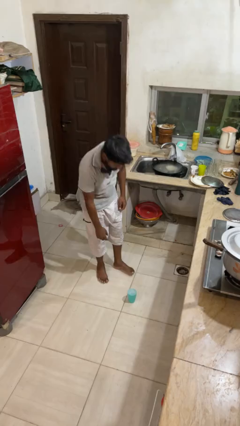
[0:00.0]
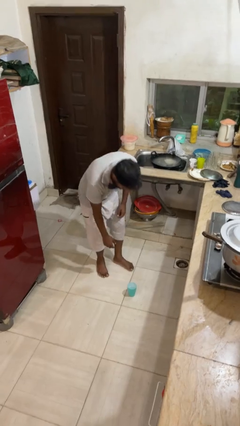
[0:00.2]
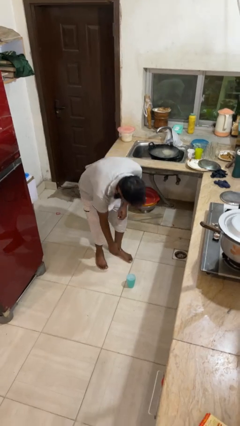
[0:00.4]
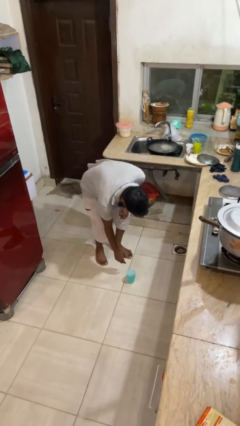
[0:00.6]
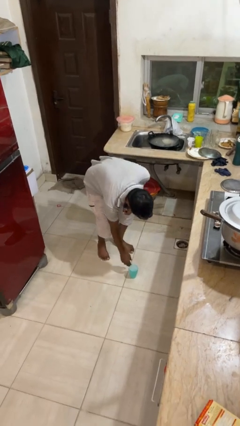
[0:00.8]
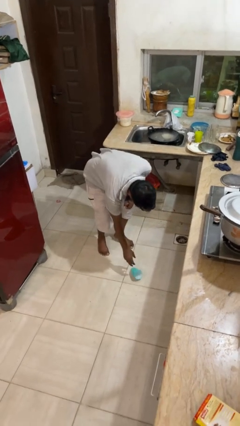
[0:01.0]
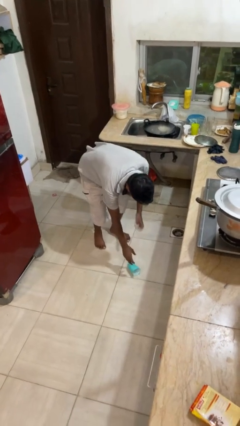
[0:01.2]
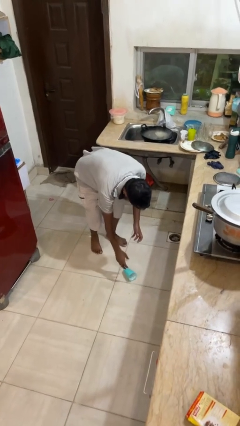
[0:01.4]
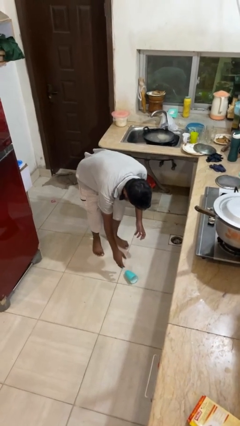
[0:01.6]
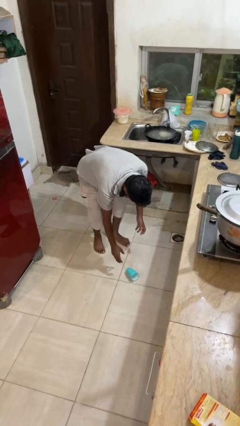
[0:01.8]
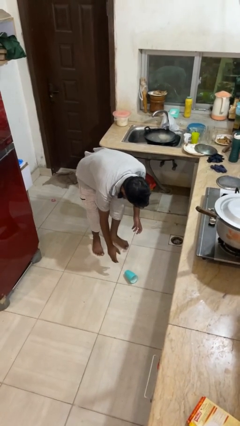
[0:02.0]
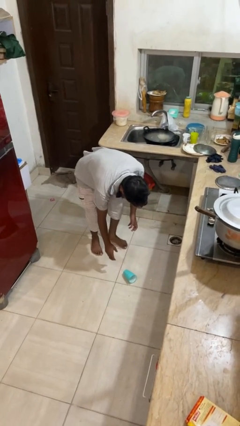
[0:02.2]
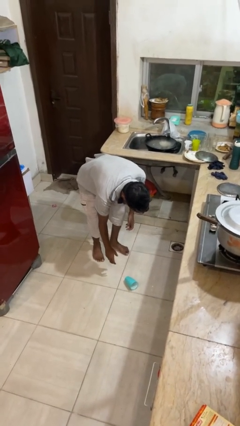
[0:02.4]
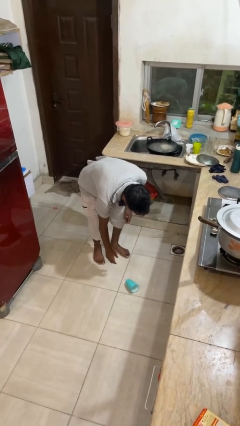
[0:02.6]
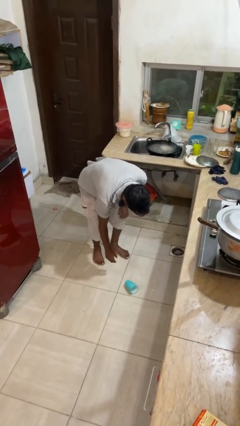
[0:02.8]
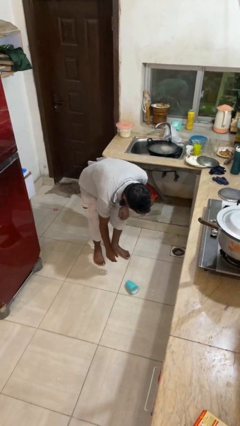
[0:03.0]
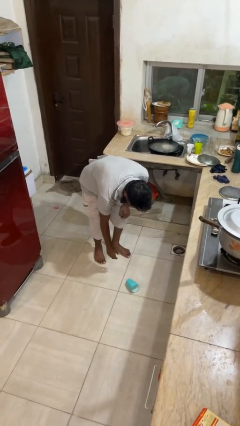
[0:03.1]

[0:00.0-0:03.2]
person spills on floor

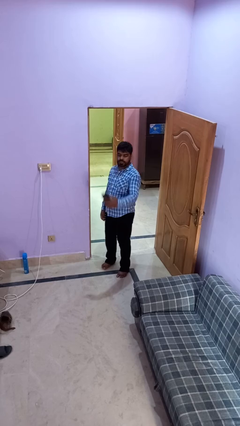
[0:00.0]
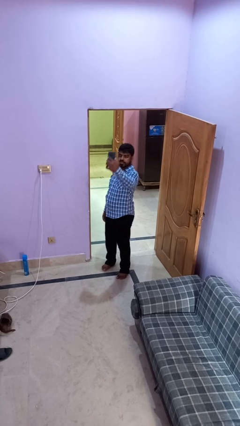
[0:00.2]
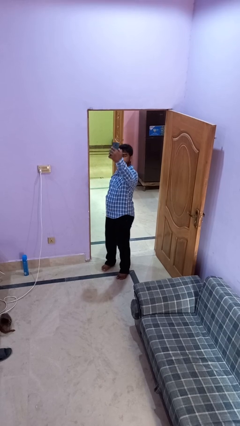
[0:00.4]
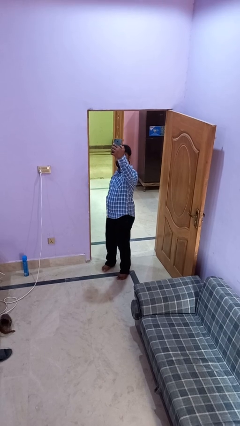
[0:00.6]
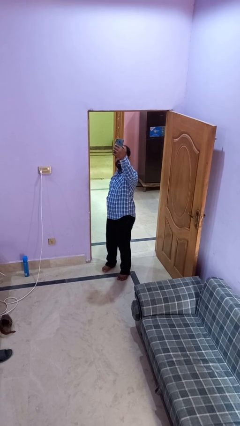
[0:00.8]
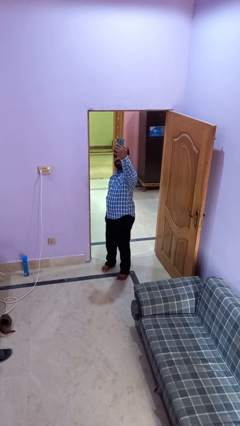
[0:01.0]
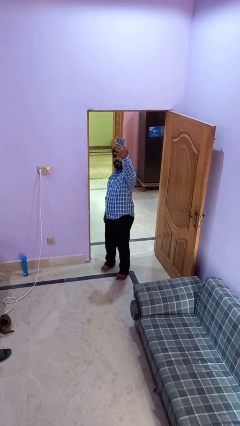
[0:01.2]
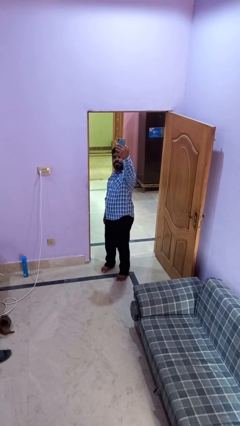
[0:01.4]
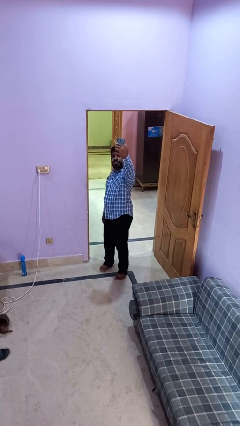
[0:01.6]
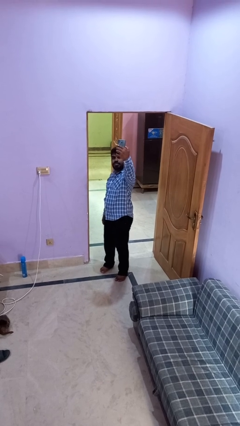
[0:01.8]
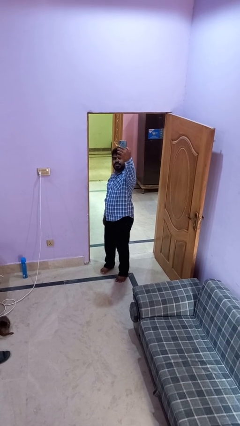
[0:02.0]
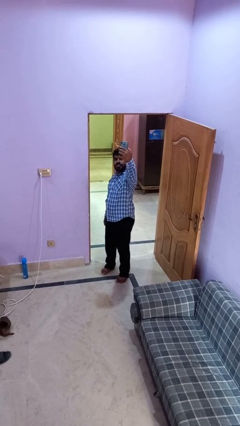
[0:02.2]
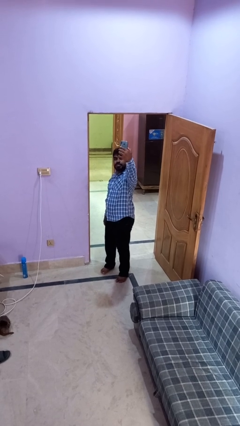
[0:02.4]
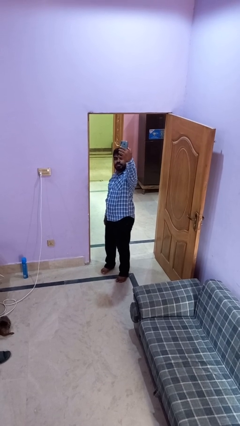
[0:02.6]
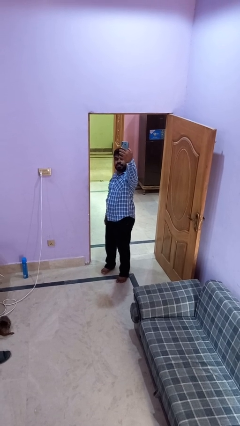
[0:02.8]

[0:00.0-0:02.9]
person takes selfie

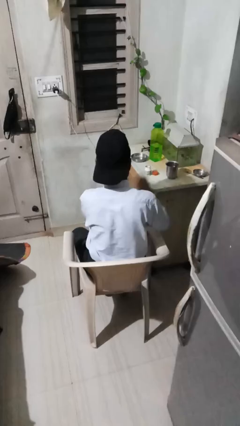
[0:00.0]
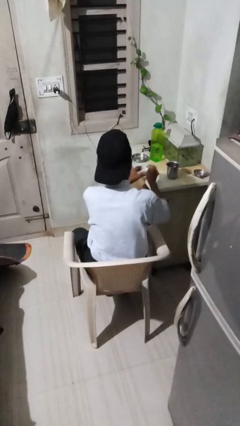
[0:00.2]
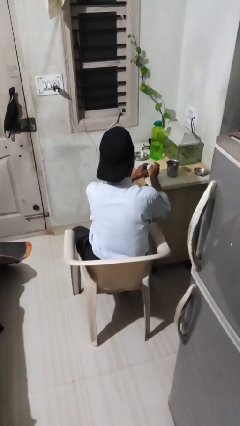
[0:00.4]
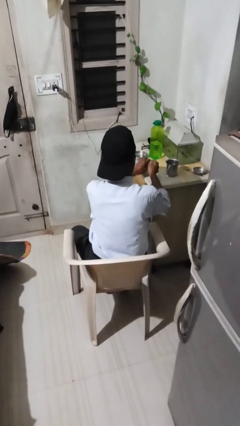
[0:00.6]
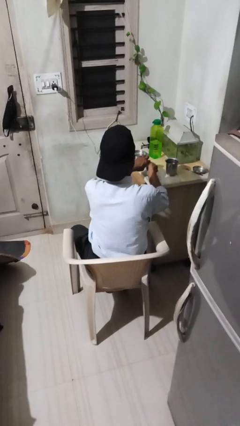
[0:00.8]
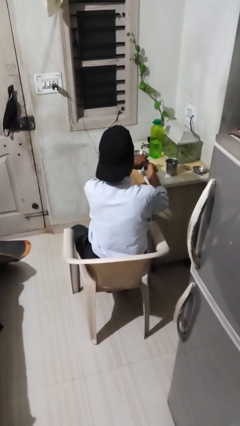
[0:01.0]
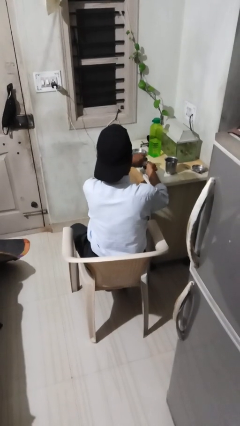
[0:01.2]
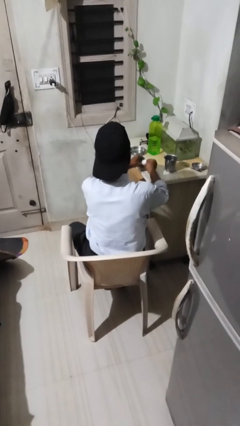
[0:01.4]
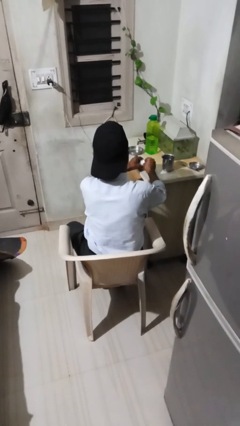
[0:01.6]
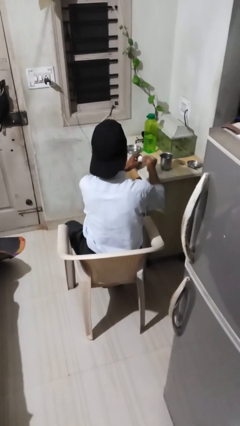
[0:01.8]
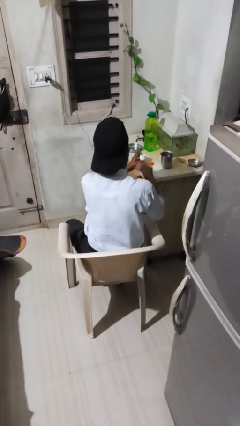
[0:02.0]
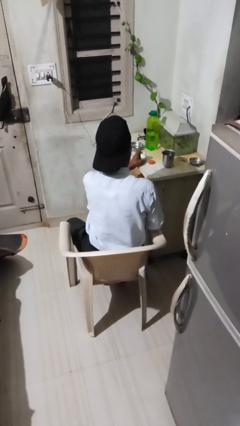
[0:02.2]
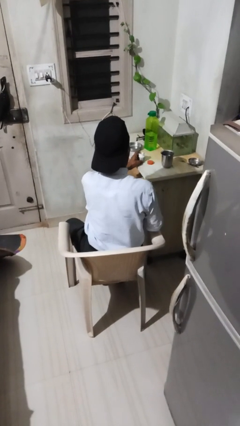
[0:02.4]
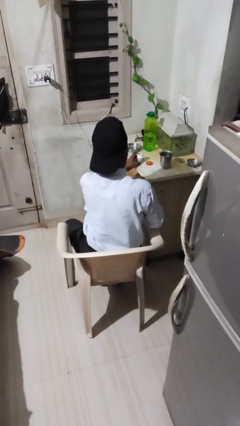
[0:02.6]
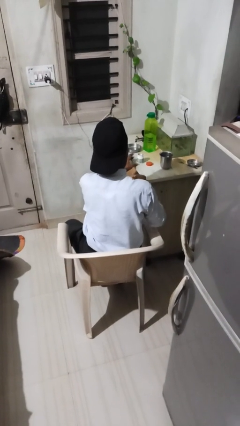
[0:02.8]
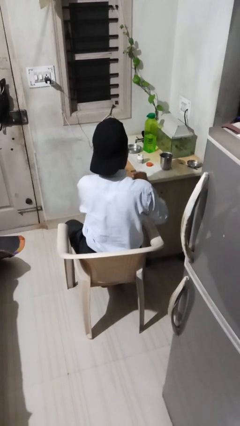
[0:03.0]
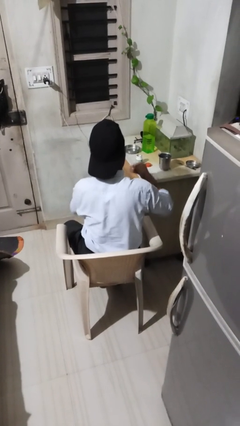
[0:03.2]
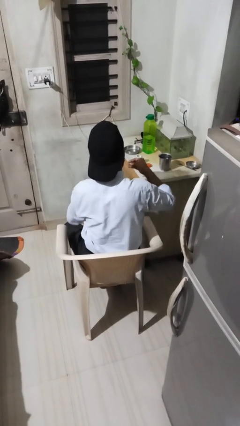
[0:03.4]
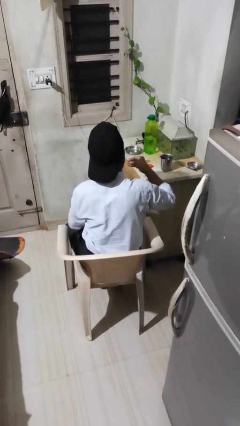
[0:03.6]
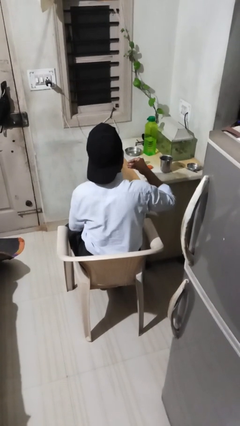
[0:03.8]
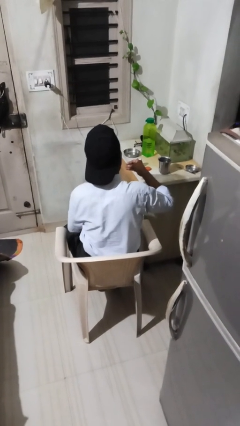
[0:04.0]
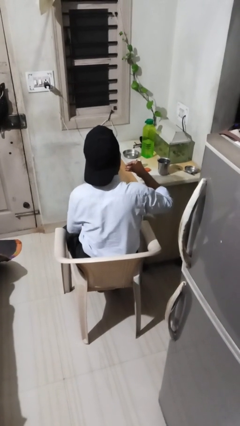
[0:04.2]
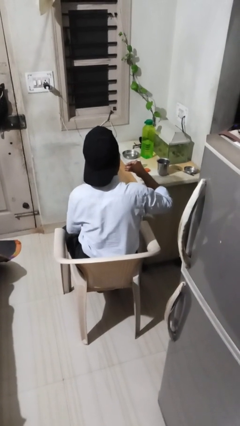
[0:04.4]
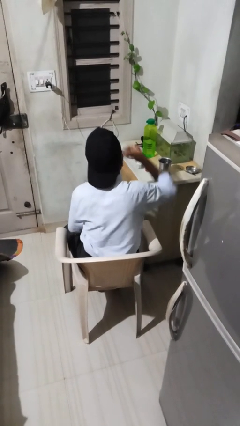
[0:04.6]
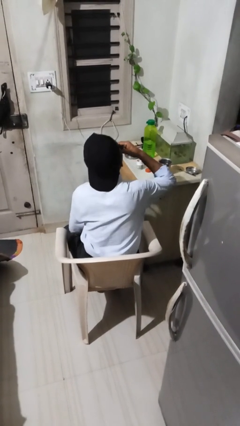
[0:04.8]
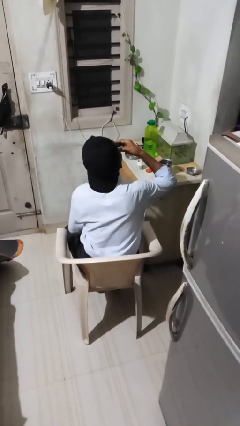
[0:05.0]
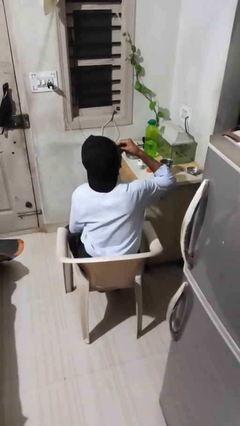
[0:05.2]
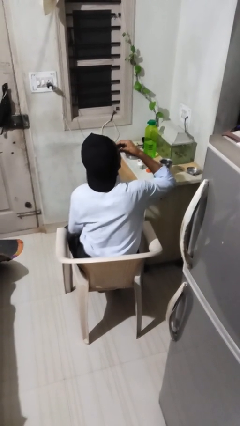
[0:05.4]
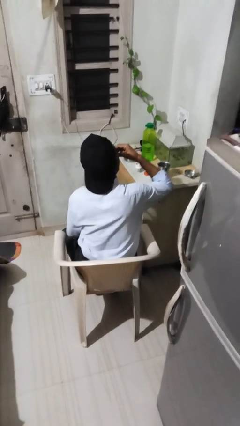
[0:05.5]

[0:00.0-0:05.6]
person takes medicine pills

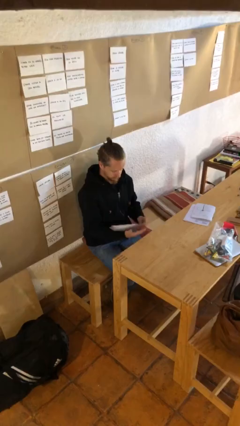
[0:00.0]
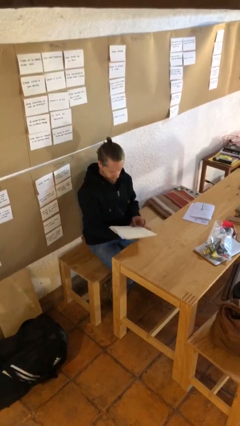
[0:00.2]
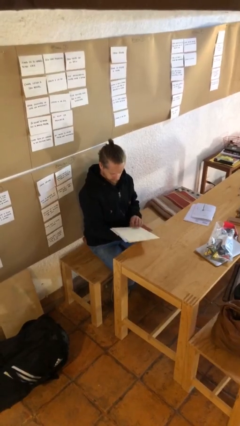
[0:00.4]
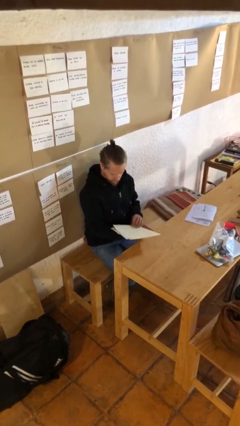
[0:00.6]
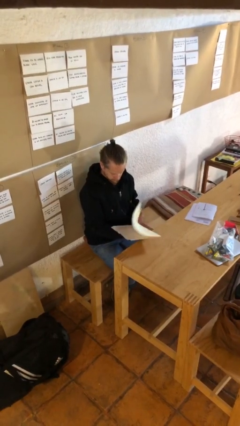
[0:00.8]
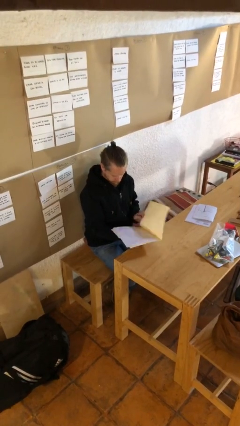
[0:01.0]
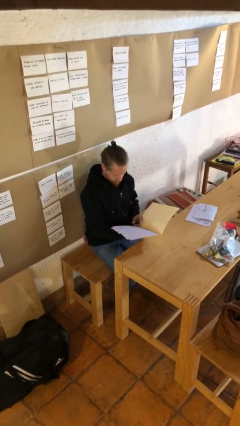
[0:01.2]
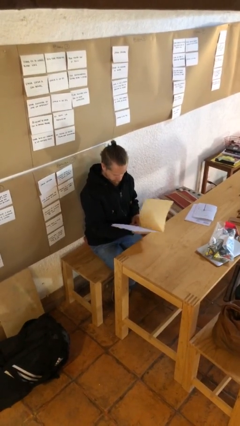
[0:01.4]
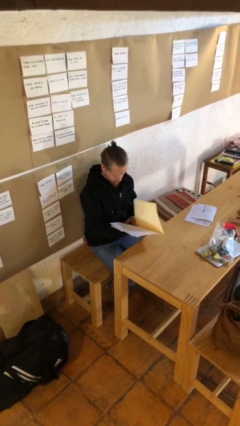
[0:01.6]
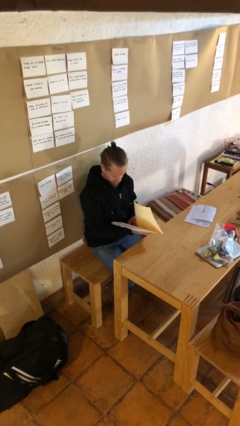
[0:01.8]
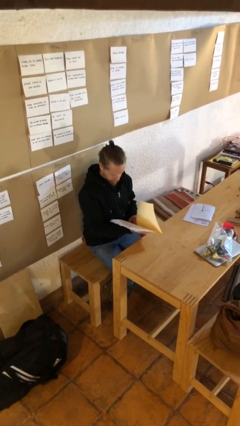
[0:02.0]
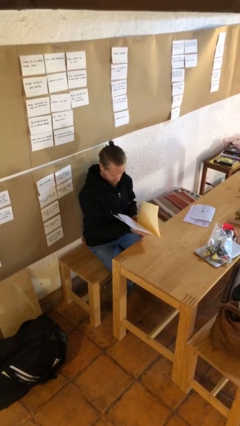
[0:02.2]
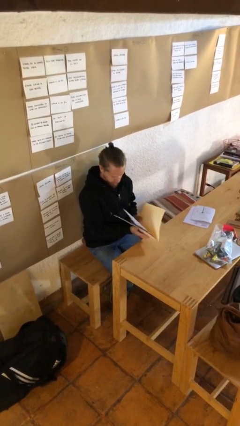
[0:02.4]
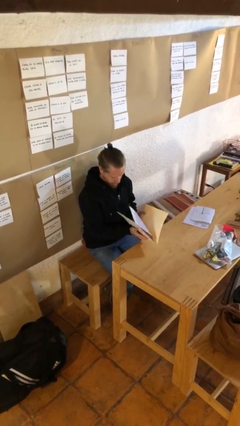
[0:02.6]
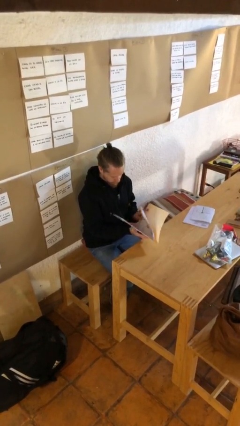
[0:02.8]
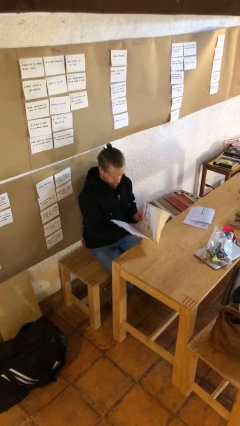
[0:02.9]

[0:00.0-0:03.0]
person reads document

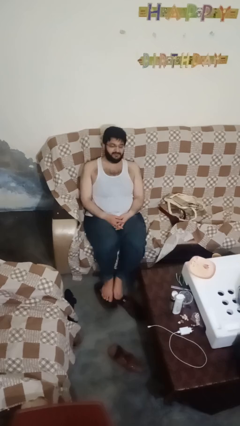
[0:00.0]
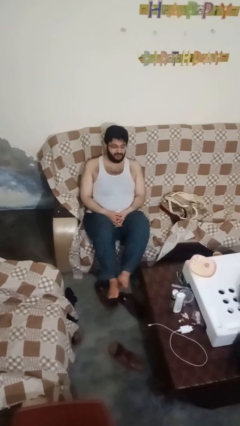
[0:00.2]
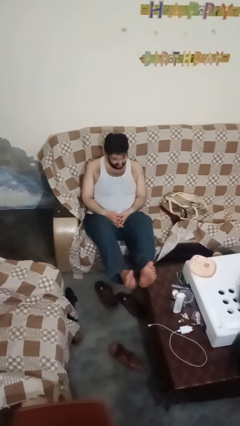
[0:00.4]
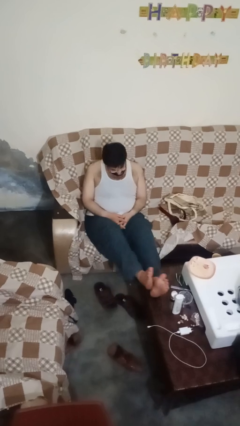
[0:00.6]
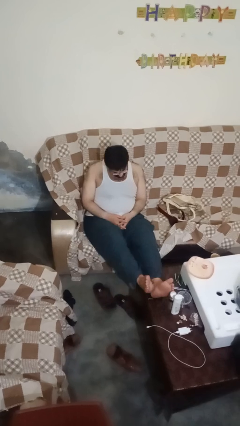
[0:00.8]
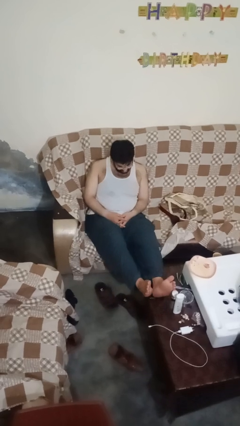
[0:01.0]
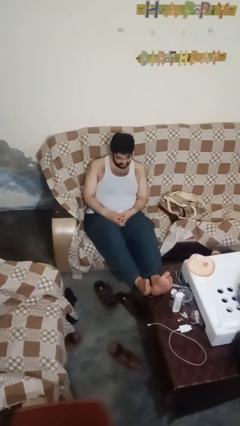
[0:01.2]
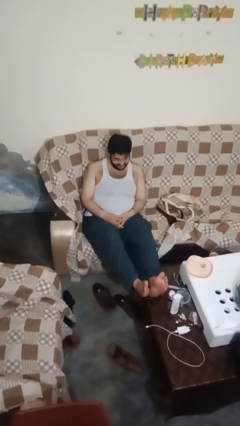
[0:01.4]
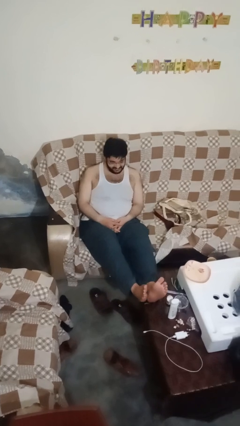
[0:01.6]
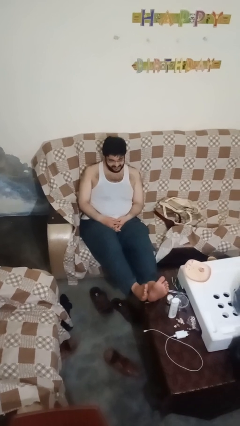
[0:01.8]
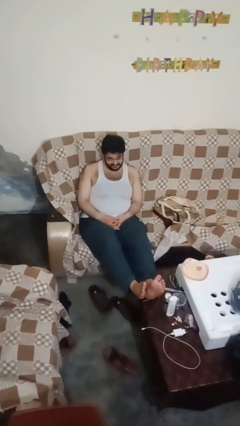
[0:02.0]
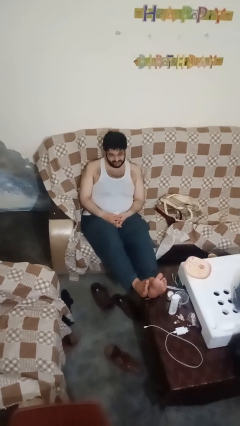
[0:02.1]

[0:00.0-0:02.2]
person puts feet up

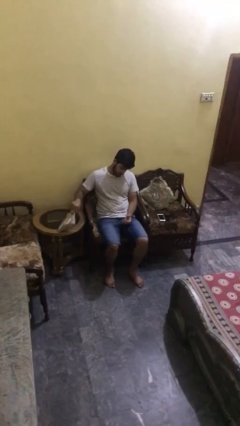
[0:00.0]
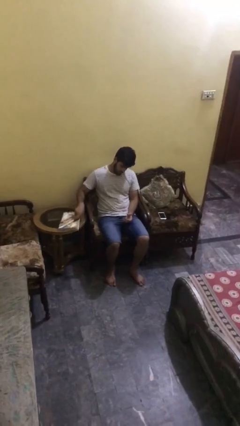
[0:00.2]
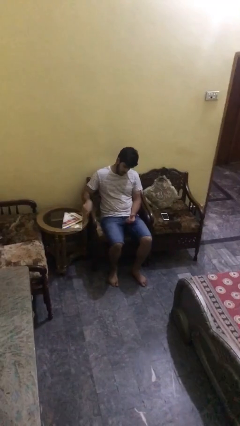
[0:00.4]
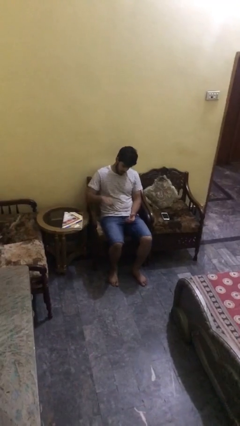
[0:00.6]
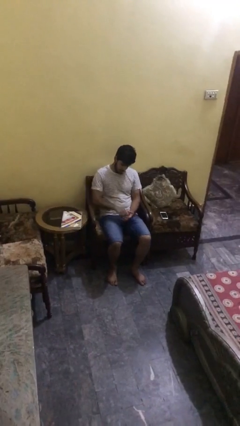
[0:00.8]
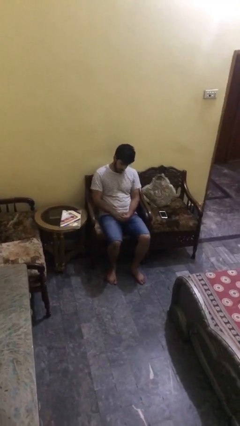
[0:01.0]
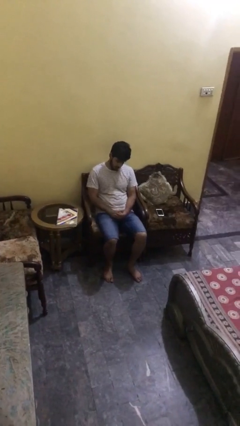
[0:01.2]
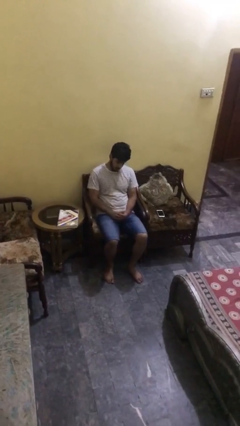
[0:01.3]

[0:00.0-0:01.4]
person puts down object on table
